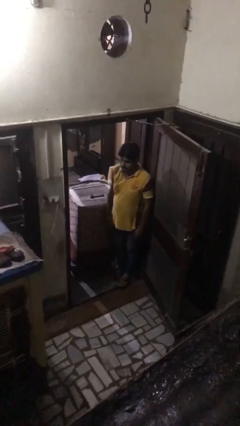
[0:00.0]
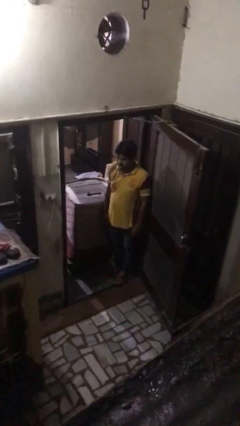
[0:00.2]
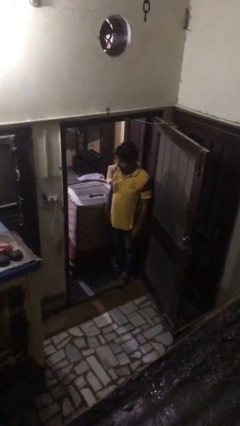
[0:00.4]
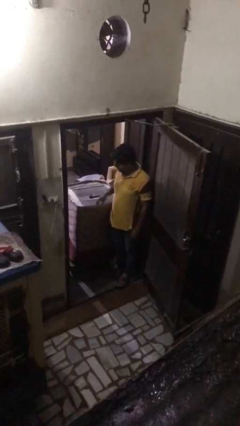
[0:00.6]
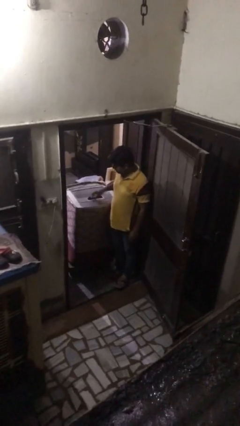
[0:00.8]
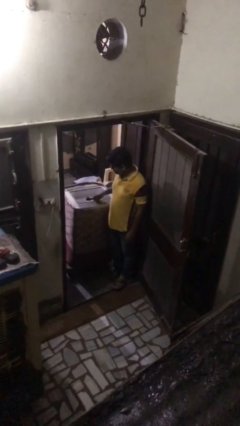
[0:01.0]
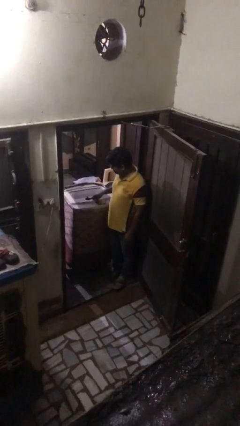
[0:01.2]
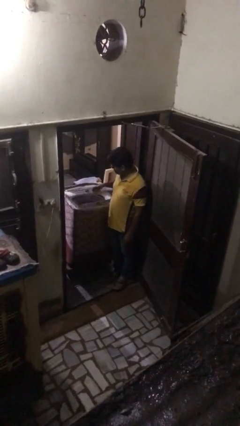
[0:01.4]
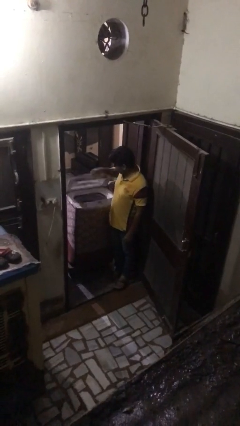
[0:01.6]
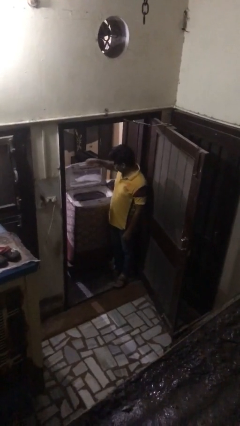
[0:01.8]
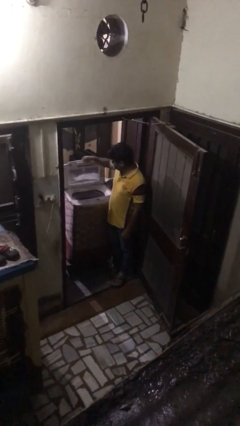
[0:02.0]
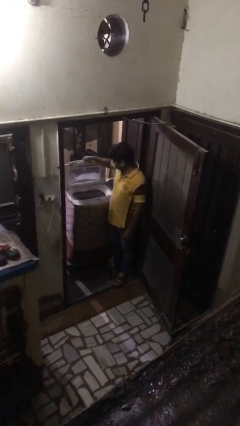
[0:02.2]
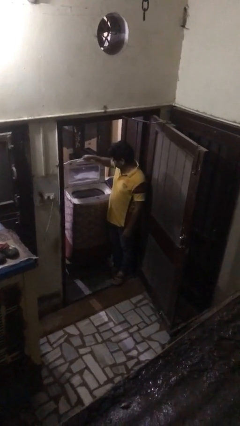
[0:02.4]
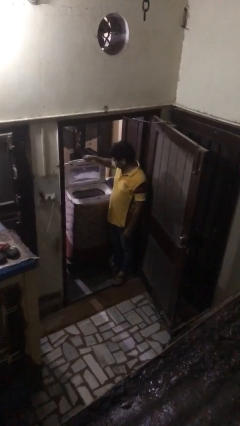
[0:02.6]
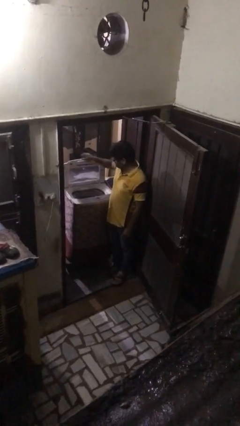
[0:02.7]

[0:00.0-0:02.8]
person opens clothes washer

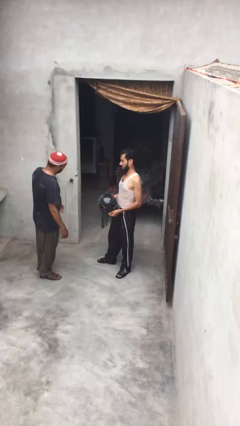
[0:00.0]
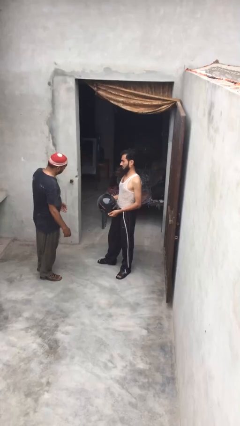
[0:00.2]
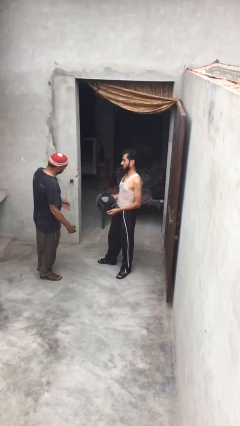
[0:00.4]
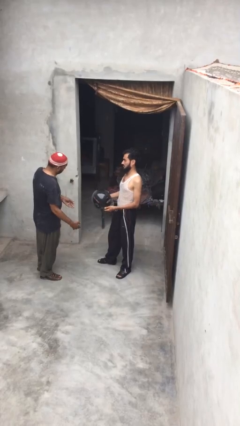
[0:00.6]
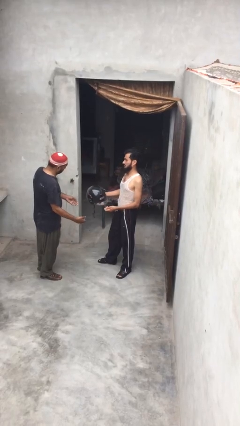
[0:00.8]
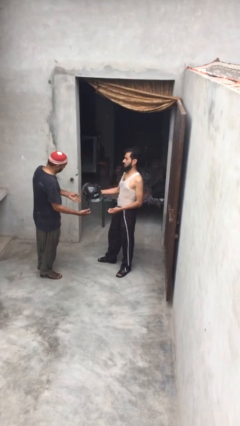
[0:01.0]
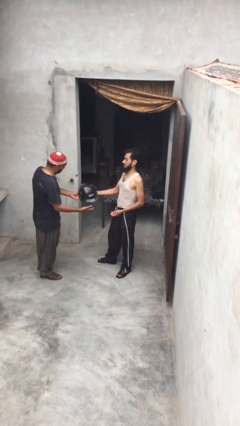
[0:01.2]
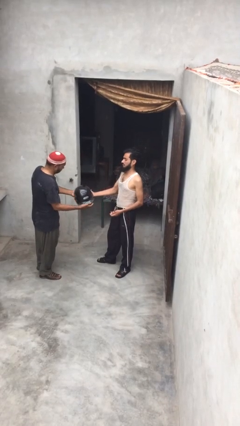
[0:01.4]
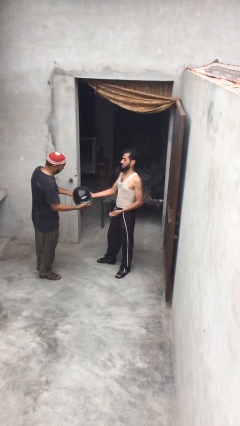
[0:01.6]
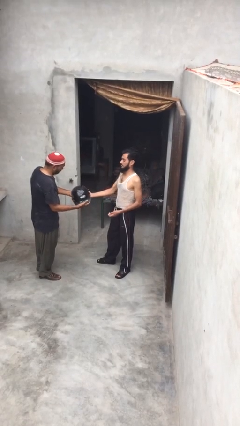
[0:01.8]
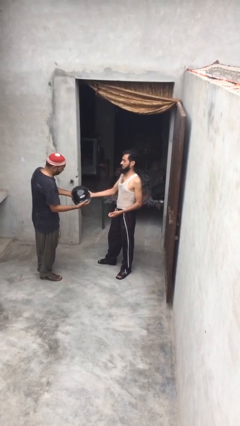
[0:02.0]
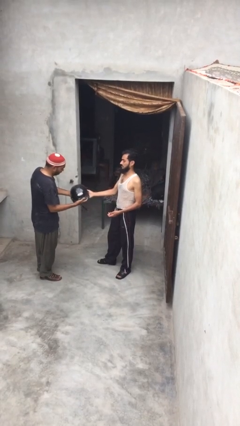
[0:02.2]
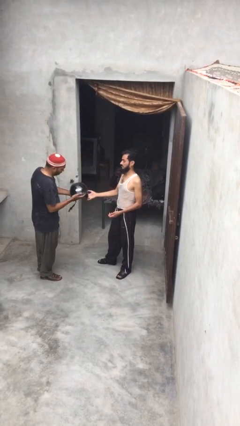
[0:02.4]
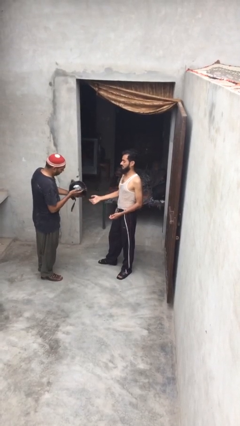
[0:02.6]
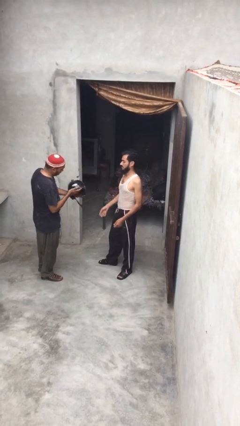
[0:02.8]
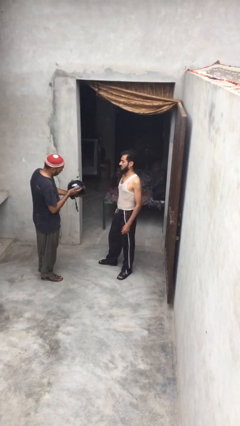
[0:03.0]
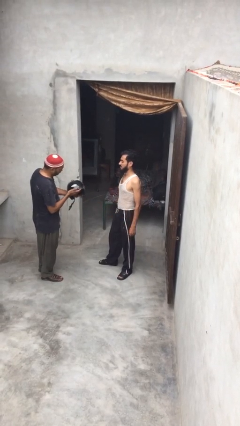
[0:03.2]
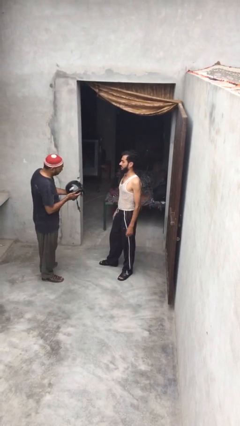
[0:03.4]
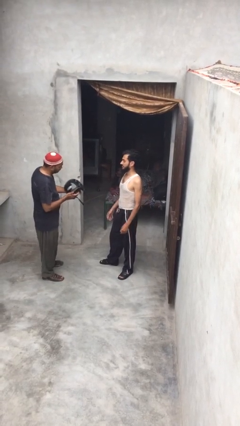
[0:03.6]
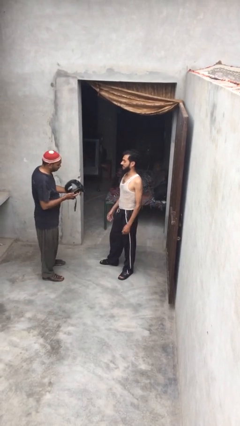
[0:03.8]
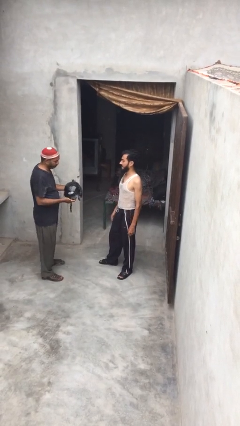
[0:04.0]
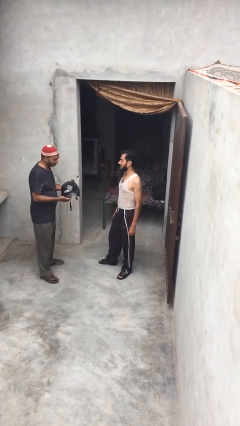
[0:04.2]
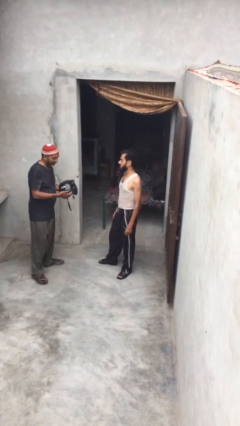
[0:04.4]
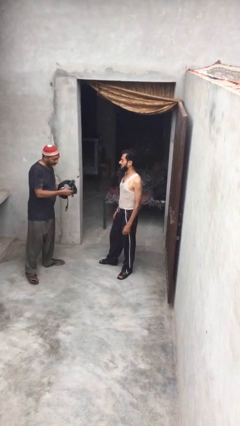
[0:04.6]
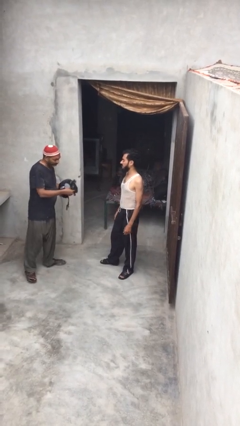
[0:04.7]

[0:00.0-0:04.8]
person transfers object to person

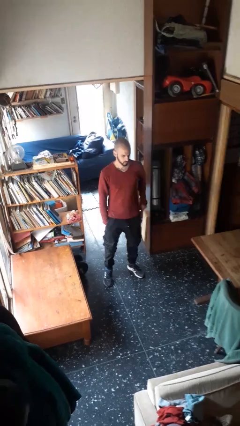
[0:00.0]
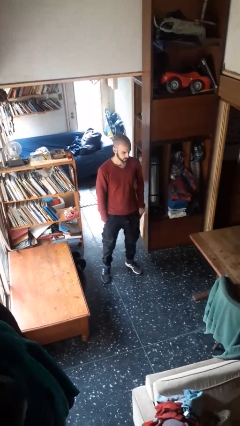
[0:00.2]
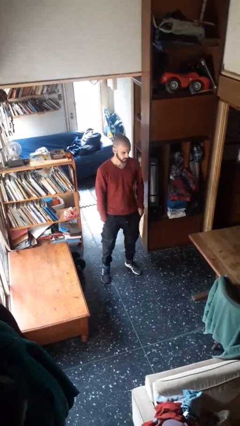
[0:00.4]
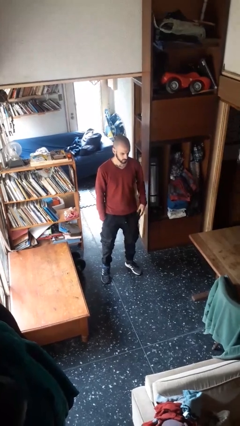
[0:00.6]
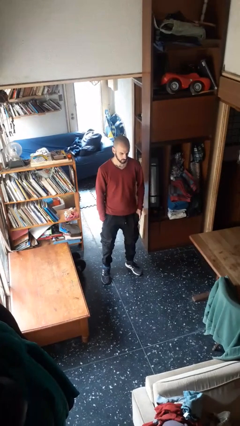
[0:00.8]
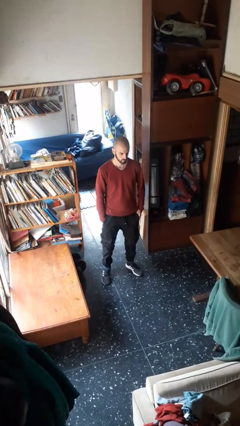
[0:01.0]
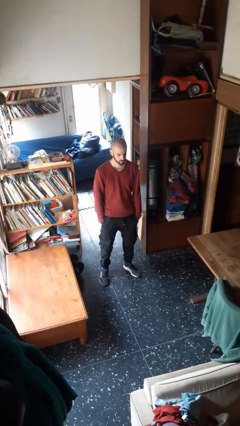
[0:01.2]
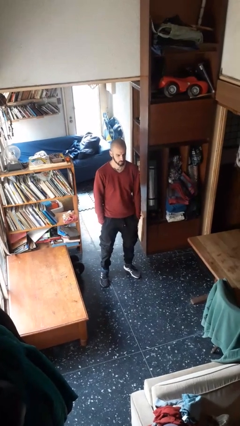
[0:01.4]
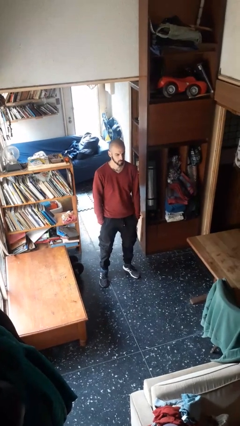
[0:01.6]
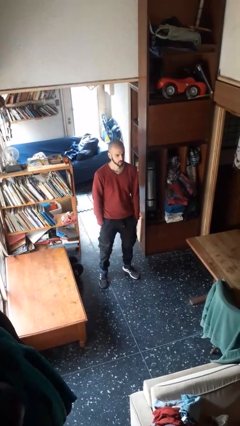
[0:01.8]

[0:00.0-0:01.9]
person puts phone into pocket

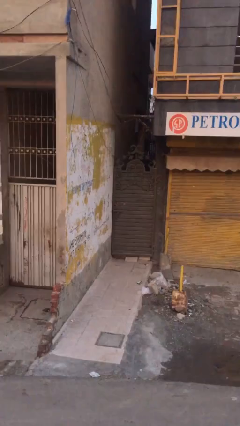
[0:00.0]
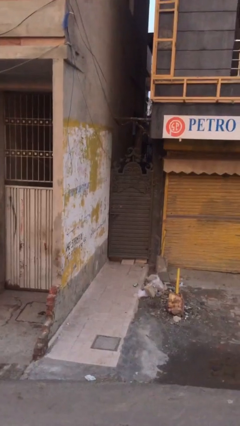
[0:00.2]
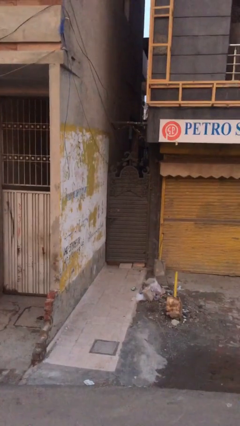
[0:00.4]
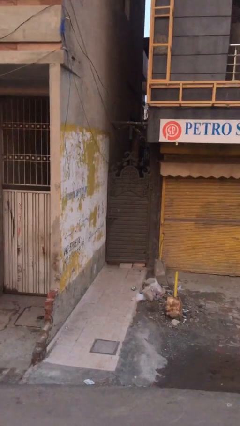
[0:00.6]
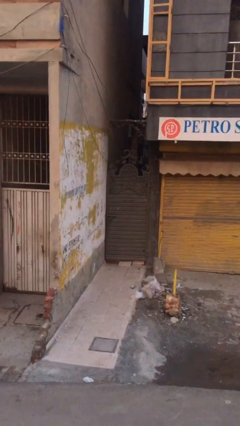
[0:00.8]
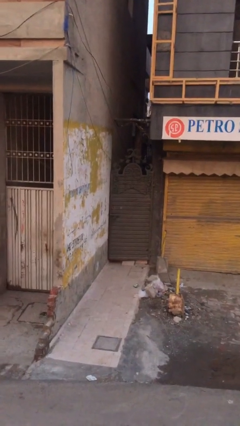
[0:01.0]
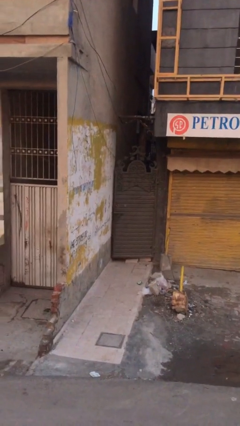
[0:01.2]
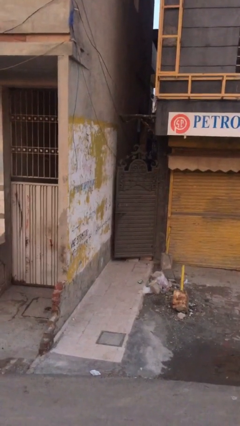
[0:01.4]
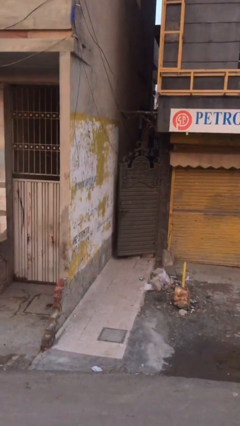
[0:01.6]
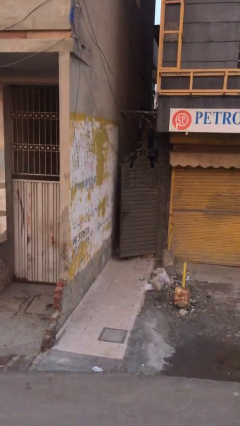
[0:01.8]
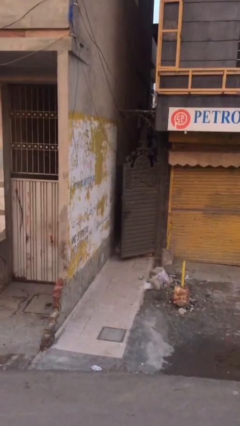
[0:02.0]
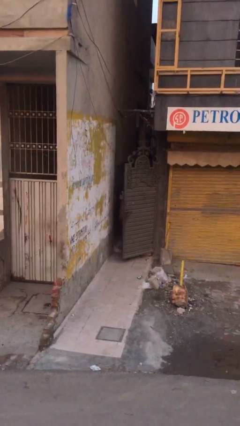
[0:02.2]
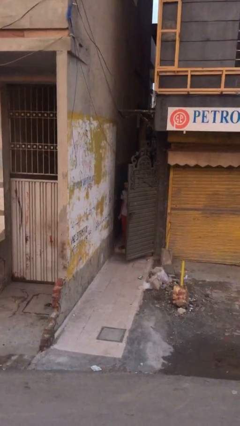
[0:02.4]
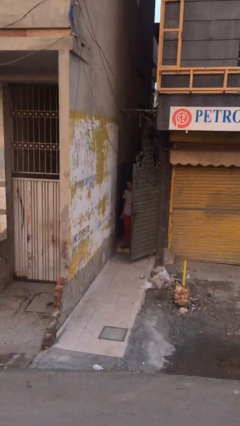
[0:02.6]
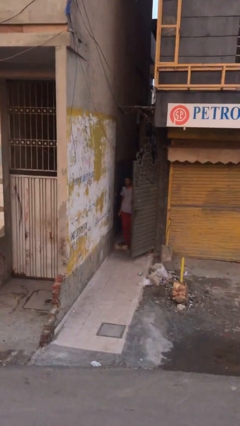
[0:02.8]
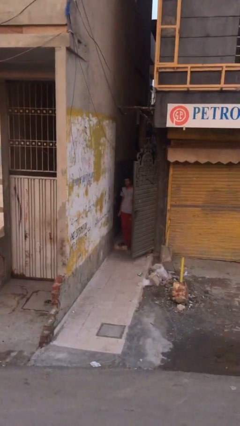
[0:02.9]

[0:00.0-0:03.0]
person opens facility door

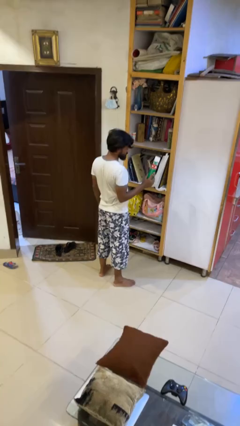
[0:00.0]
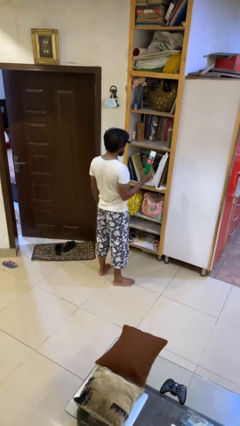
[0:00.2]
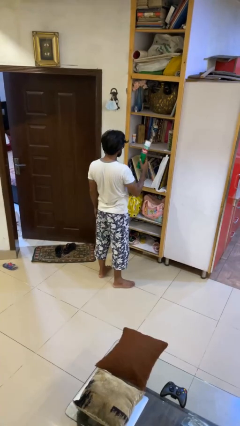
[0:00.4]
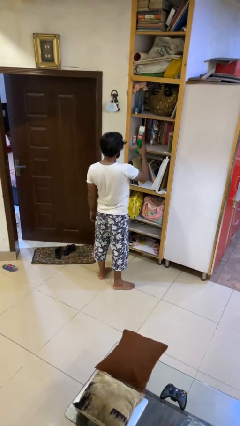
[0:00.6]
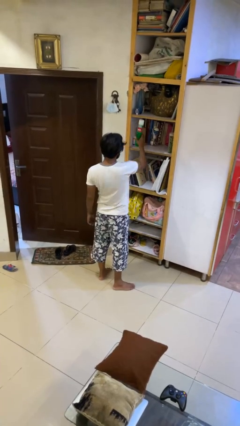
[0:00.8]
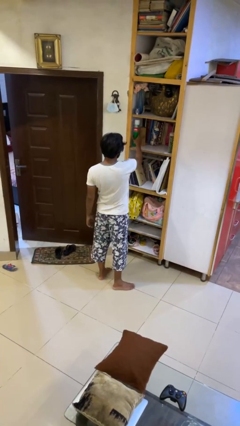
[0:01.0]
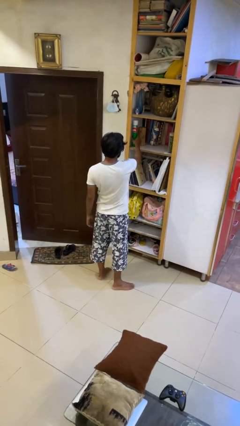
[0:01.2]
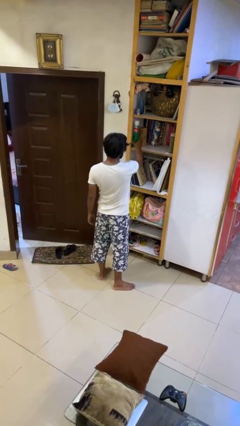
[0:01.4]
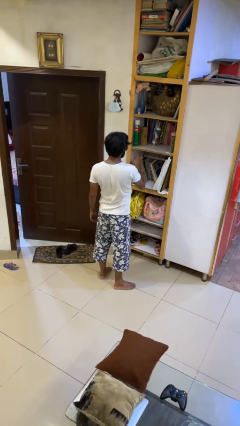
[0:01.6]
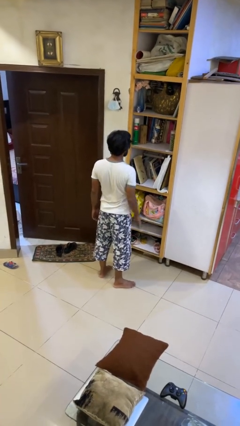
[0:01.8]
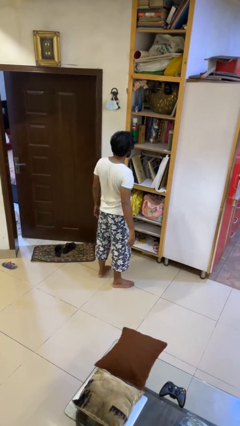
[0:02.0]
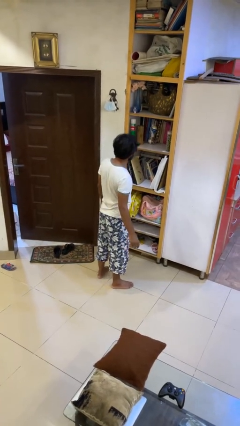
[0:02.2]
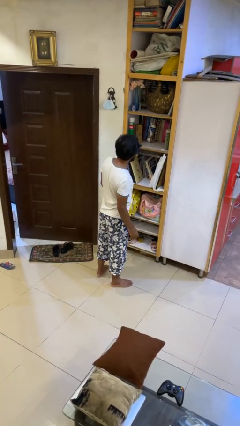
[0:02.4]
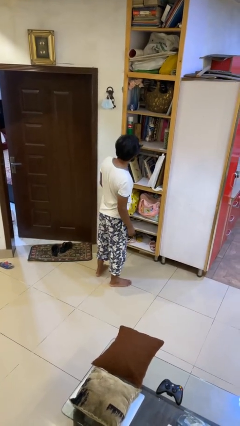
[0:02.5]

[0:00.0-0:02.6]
person puts down object into cabinet

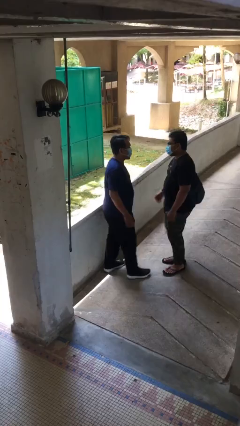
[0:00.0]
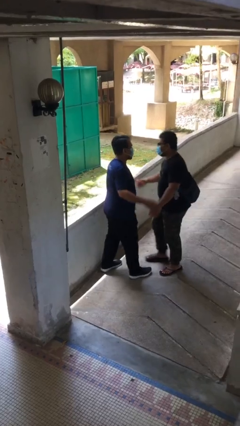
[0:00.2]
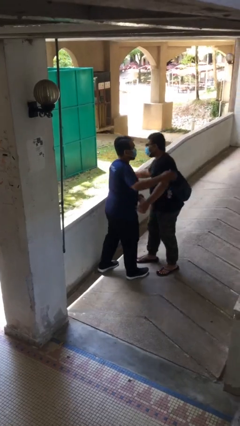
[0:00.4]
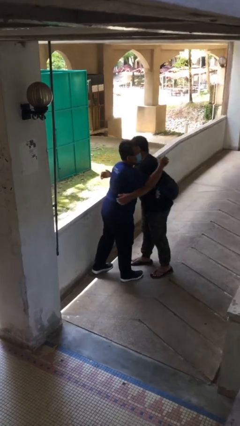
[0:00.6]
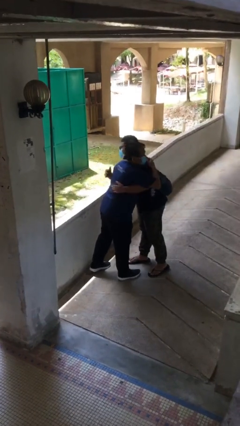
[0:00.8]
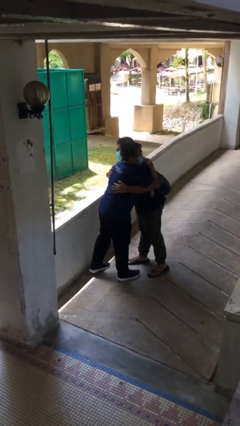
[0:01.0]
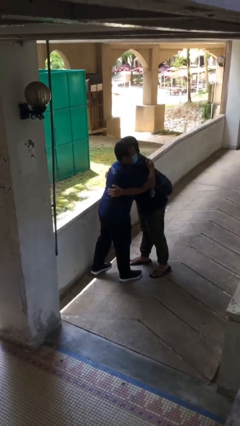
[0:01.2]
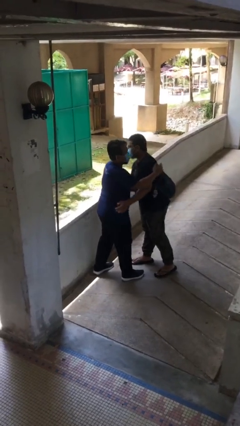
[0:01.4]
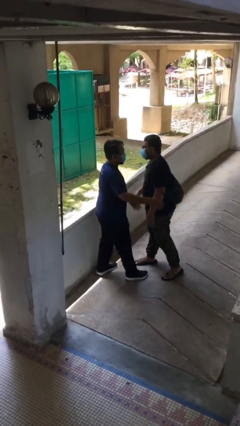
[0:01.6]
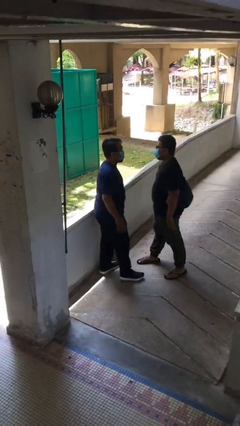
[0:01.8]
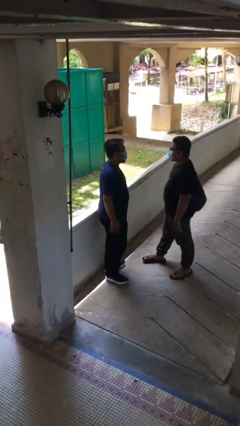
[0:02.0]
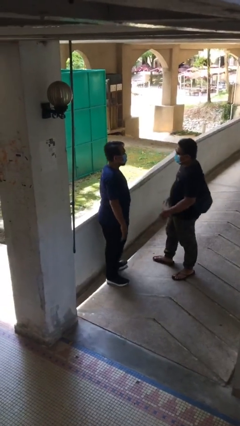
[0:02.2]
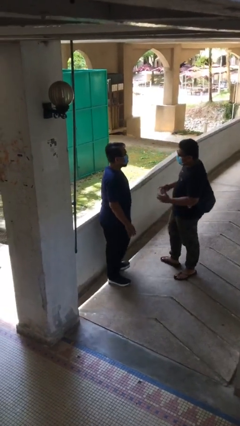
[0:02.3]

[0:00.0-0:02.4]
person embraces person
